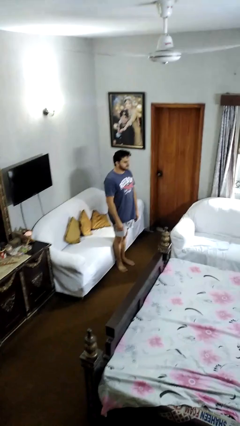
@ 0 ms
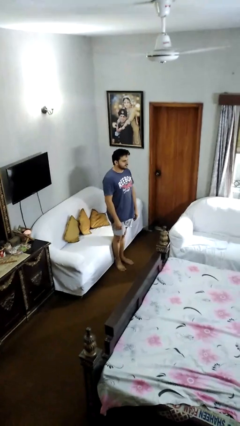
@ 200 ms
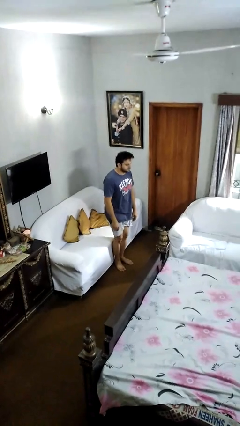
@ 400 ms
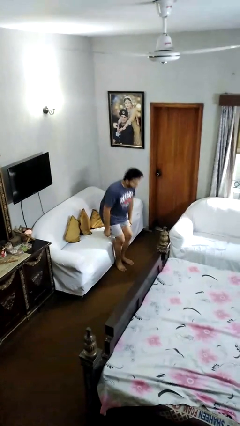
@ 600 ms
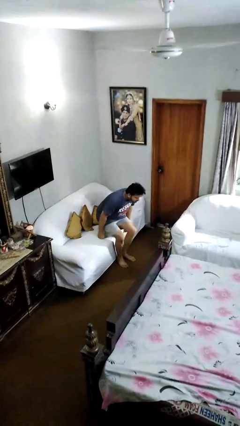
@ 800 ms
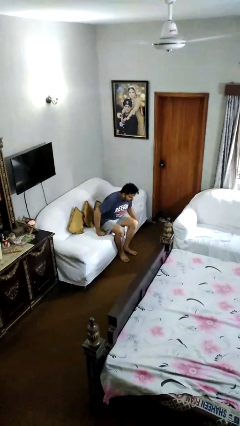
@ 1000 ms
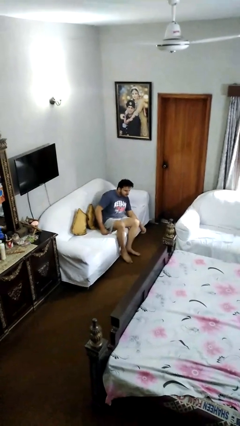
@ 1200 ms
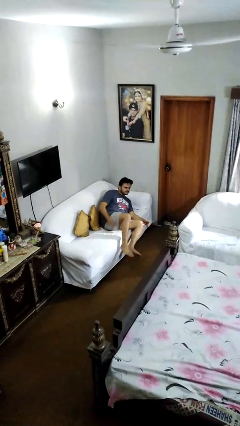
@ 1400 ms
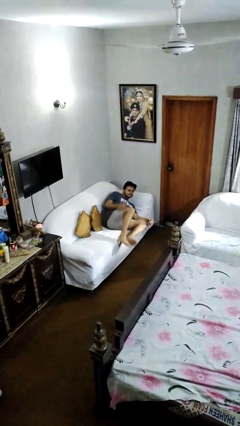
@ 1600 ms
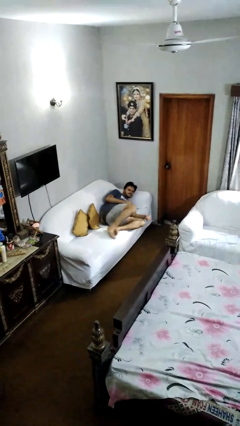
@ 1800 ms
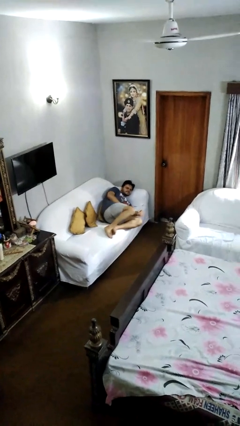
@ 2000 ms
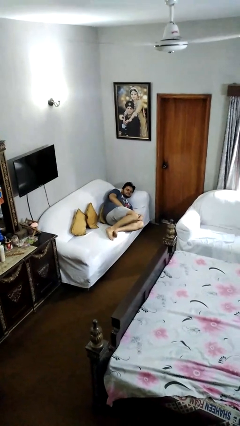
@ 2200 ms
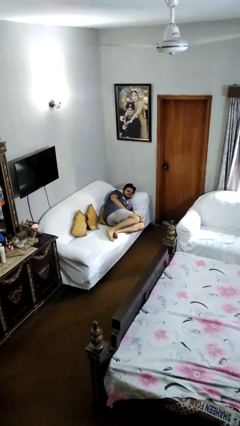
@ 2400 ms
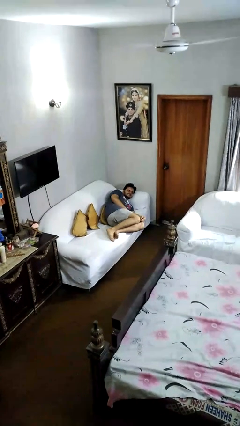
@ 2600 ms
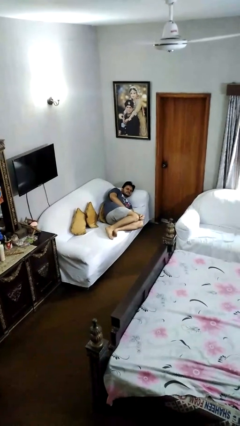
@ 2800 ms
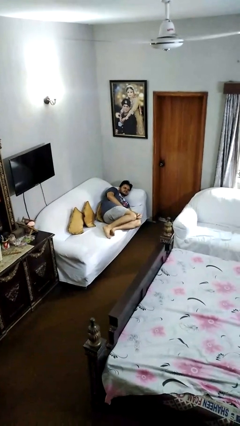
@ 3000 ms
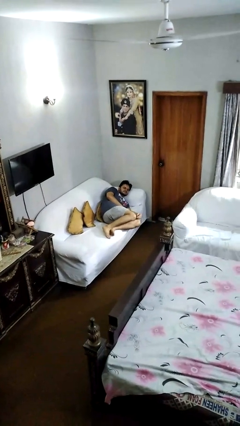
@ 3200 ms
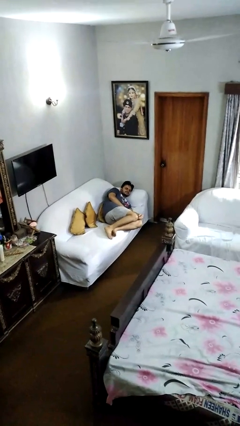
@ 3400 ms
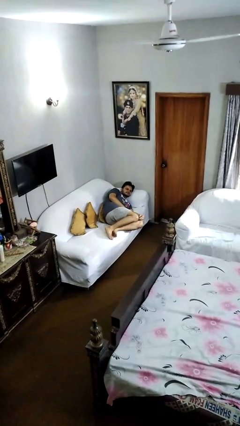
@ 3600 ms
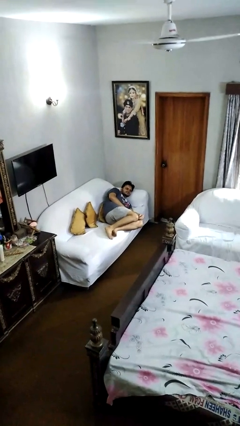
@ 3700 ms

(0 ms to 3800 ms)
person lies down on couch

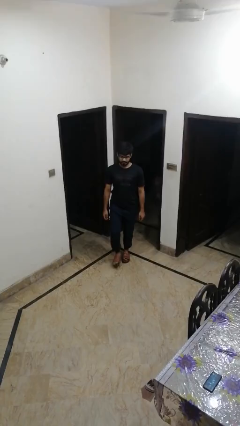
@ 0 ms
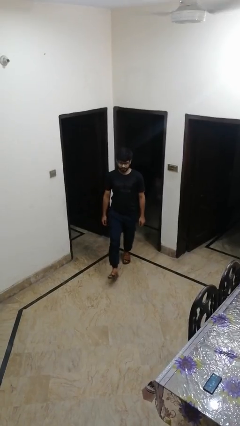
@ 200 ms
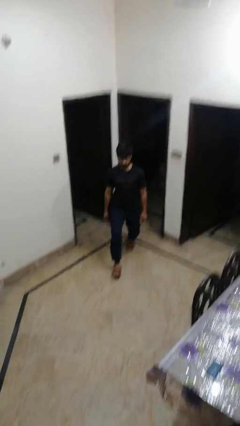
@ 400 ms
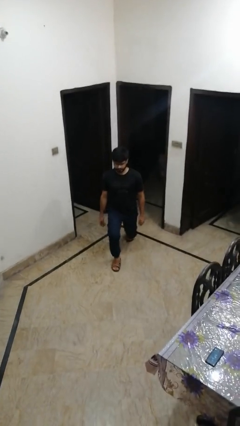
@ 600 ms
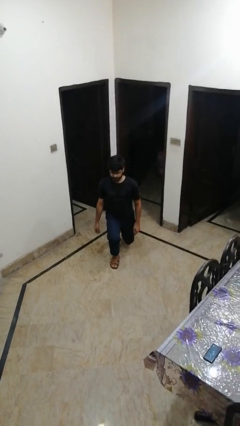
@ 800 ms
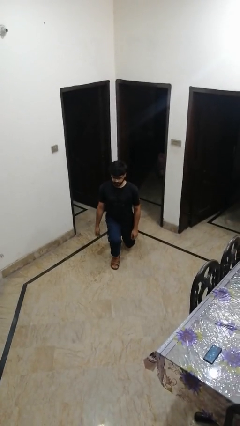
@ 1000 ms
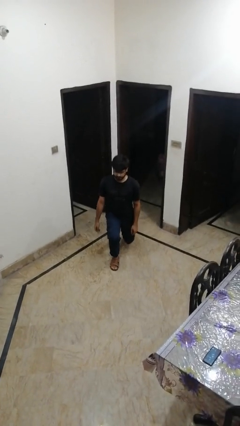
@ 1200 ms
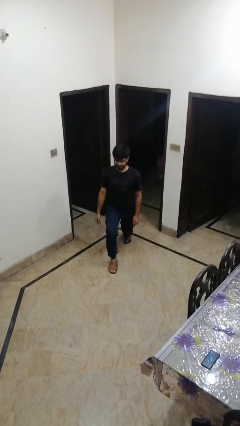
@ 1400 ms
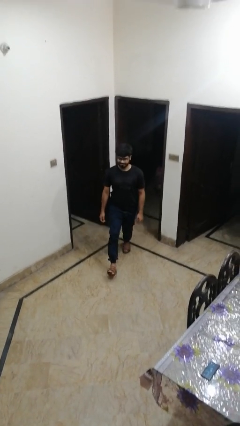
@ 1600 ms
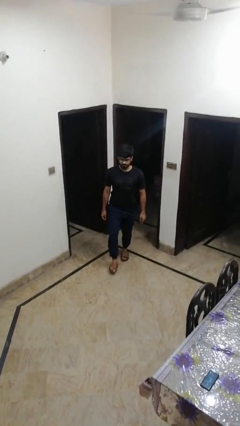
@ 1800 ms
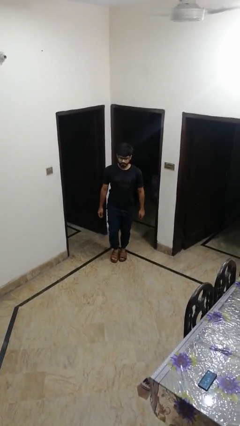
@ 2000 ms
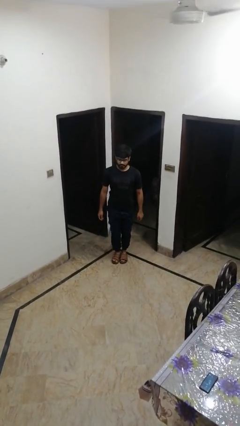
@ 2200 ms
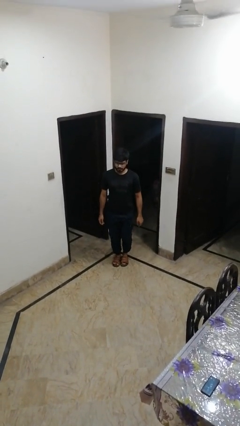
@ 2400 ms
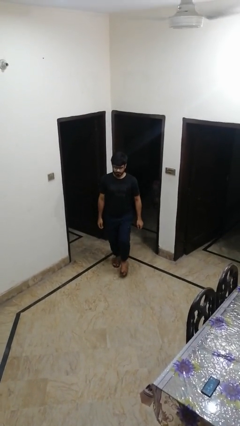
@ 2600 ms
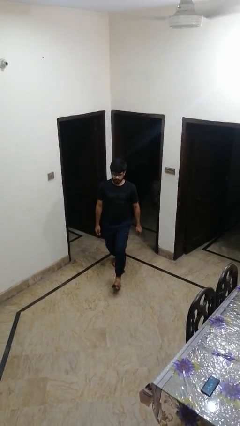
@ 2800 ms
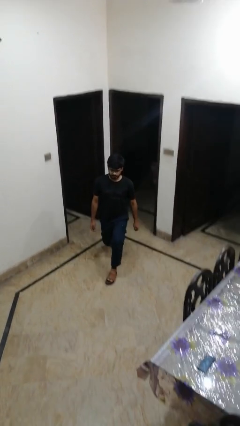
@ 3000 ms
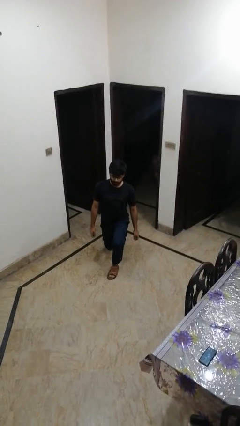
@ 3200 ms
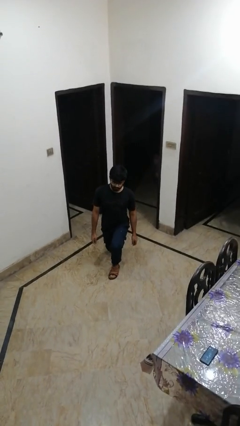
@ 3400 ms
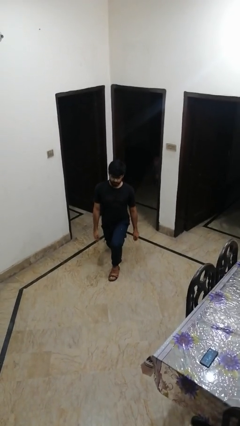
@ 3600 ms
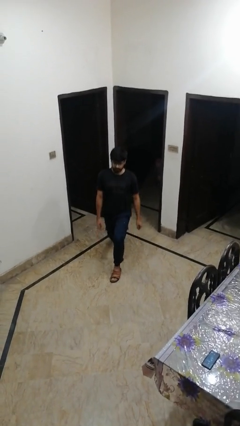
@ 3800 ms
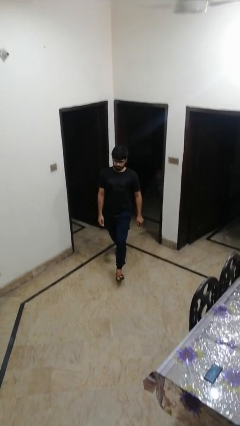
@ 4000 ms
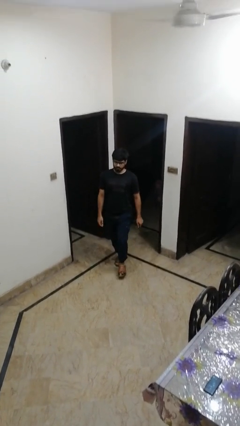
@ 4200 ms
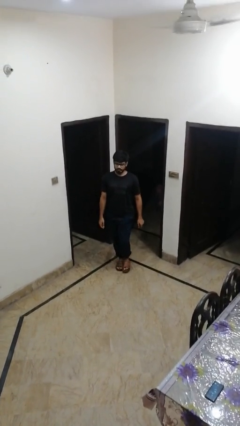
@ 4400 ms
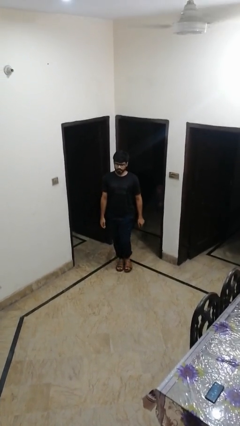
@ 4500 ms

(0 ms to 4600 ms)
person exercises with lunges

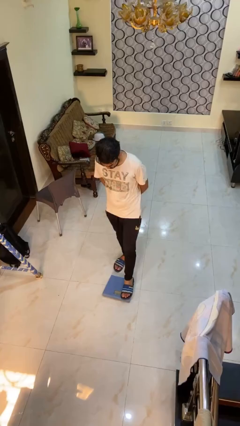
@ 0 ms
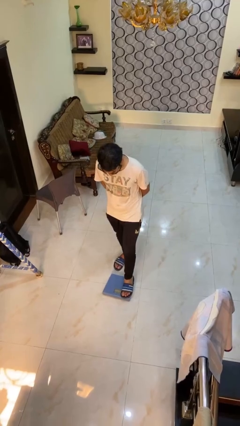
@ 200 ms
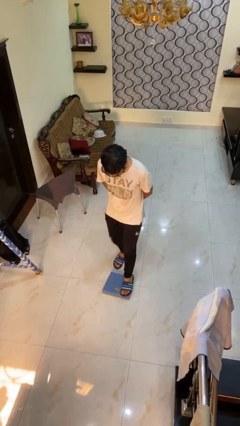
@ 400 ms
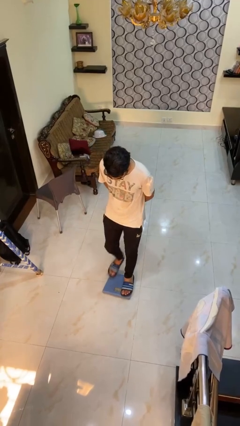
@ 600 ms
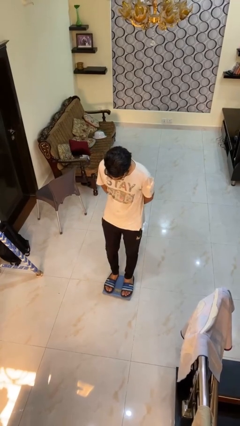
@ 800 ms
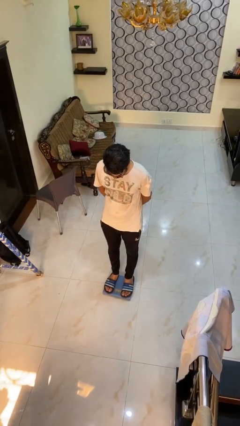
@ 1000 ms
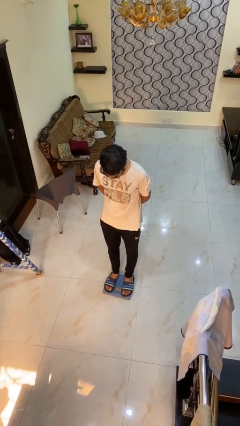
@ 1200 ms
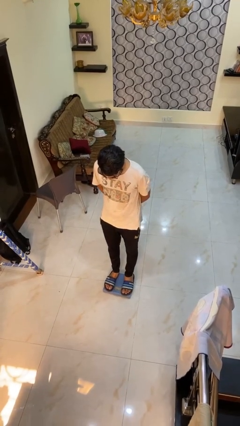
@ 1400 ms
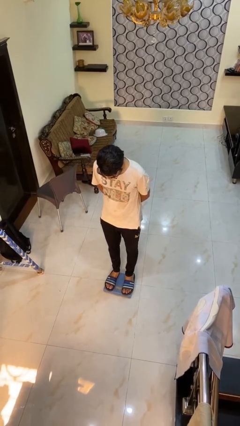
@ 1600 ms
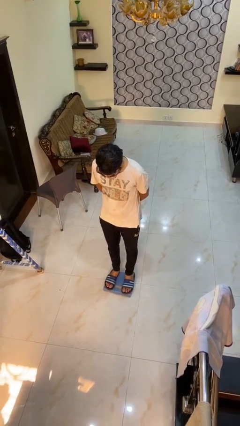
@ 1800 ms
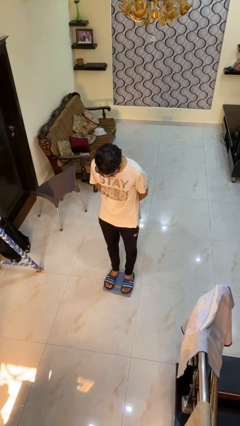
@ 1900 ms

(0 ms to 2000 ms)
person uses bodyweight scale

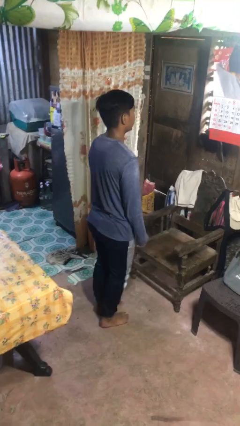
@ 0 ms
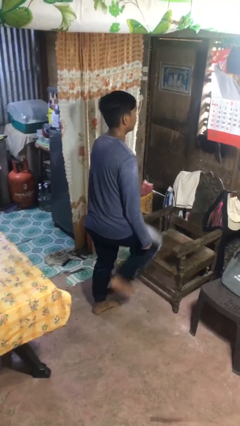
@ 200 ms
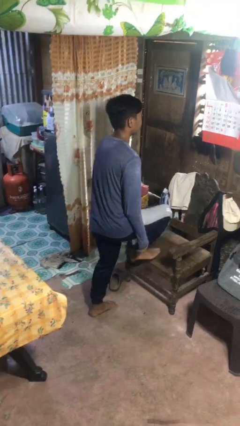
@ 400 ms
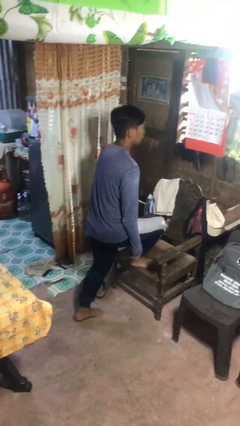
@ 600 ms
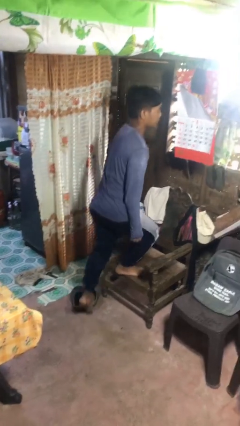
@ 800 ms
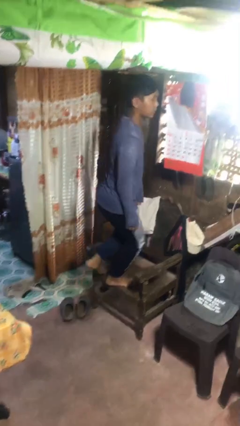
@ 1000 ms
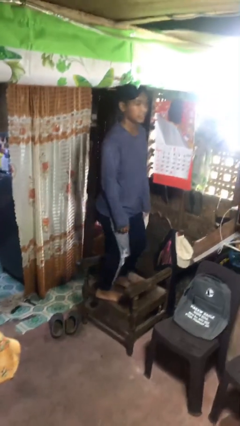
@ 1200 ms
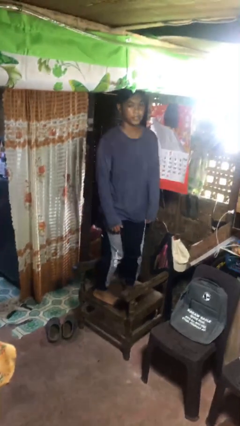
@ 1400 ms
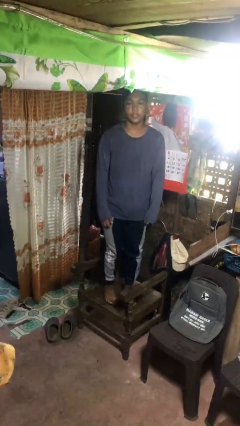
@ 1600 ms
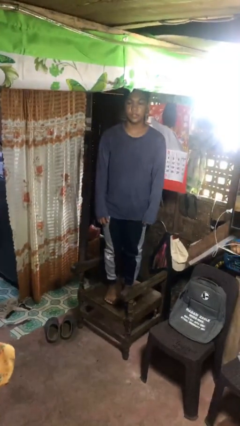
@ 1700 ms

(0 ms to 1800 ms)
person climbs on chair

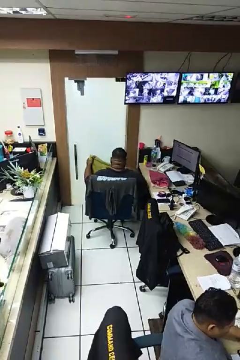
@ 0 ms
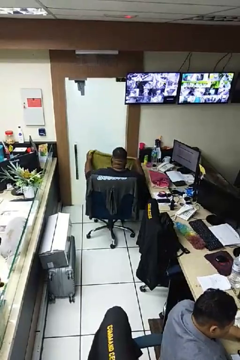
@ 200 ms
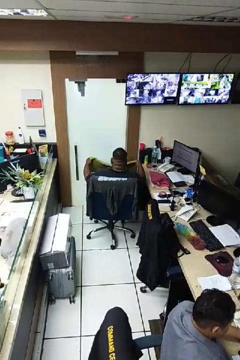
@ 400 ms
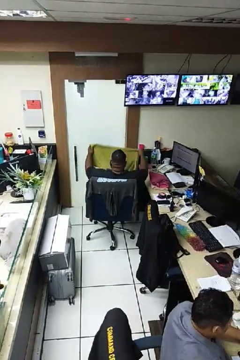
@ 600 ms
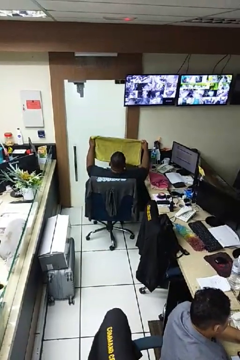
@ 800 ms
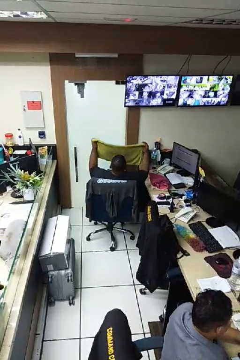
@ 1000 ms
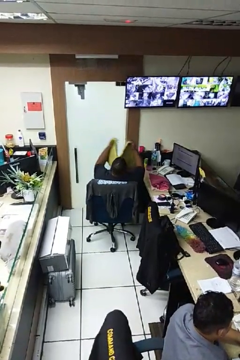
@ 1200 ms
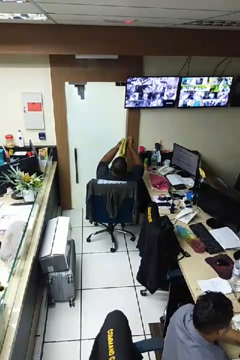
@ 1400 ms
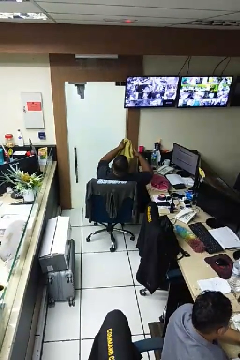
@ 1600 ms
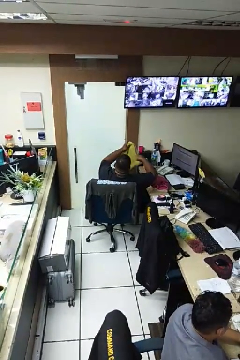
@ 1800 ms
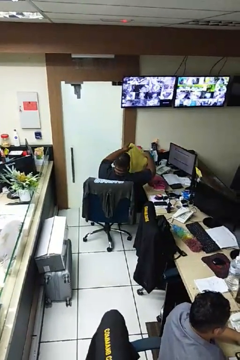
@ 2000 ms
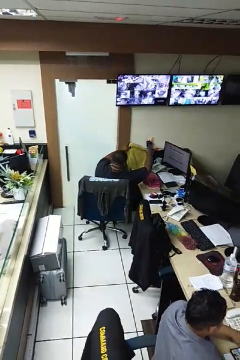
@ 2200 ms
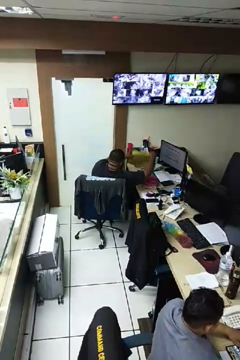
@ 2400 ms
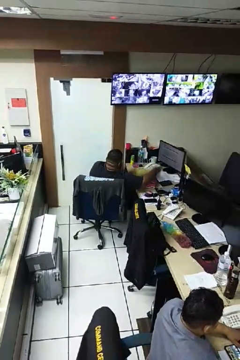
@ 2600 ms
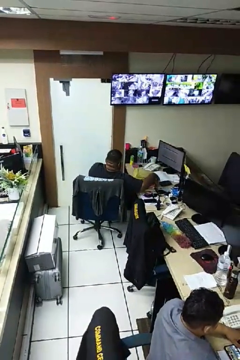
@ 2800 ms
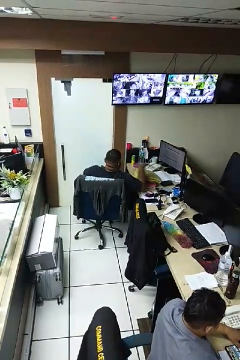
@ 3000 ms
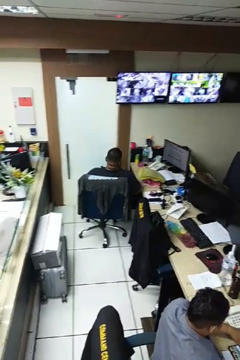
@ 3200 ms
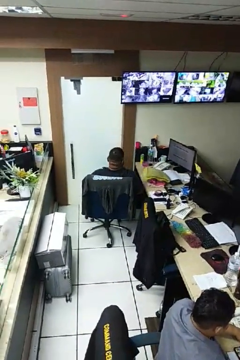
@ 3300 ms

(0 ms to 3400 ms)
person folds towel

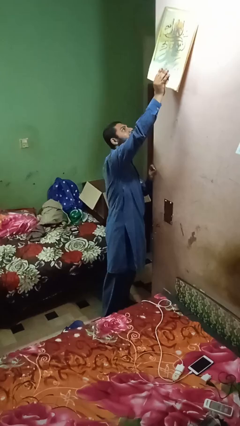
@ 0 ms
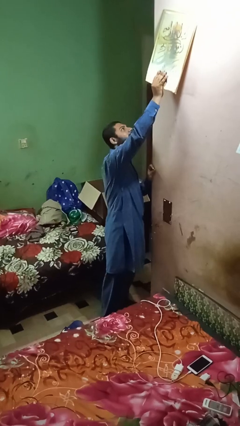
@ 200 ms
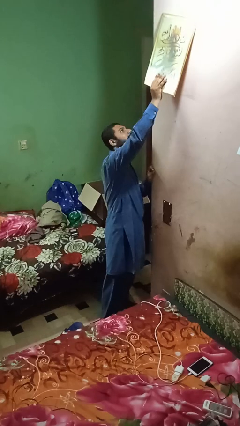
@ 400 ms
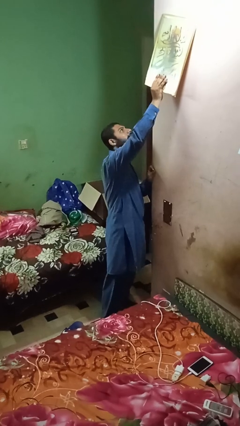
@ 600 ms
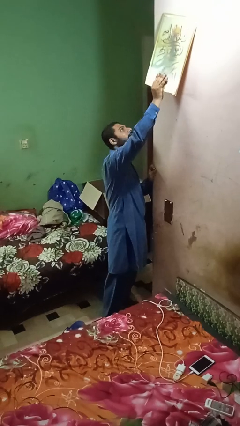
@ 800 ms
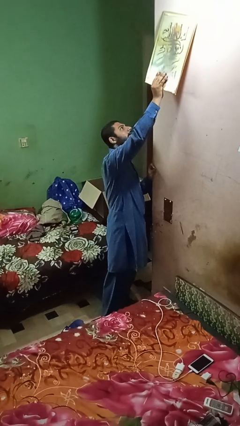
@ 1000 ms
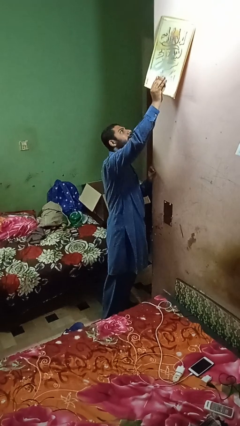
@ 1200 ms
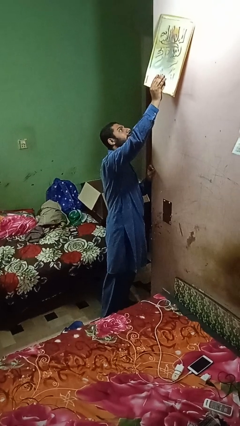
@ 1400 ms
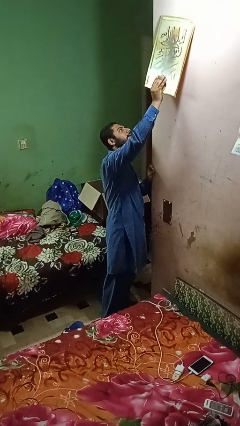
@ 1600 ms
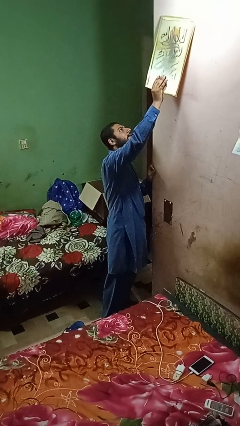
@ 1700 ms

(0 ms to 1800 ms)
person puts up picture frame

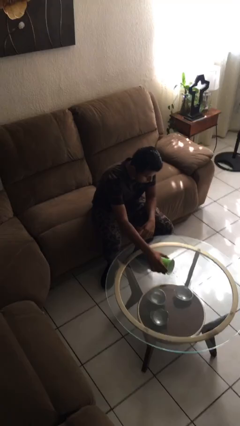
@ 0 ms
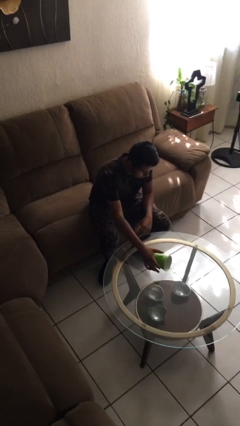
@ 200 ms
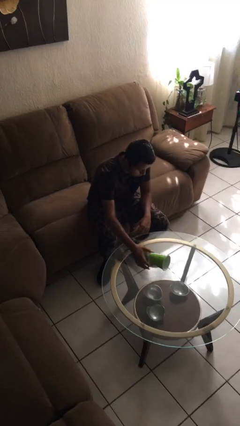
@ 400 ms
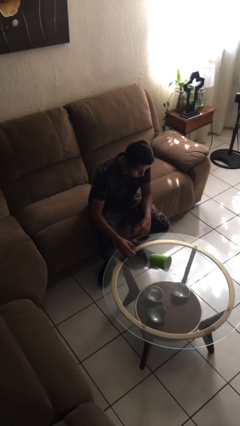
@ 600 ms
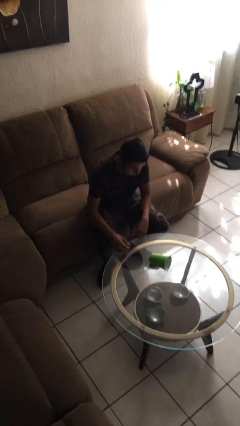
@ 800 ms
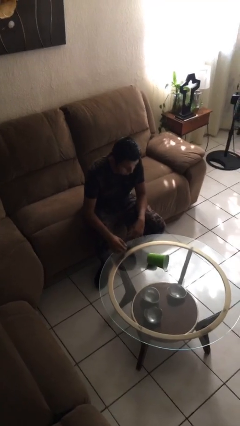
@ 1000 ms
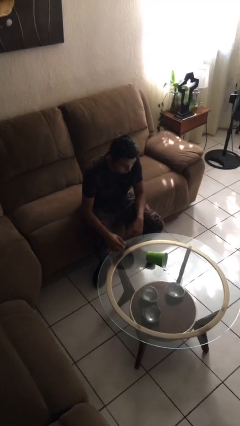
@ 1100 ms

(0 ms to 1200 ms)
person spills on table
